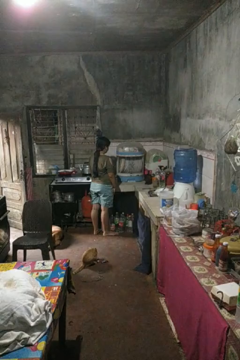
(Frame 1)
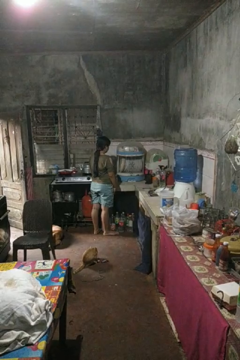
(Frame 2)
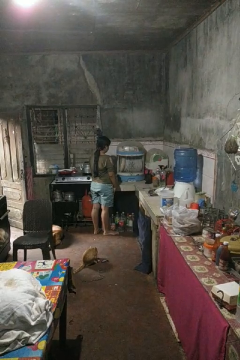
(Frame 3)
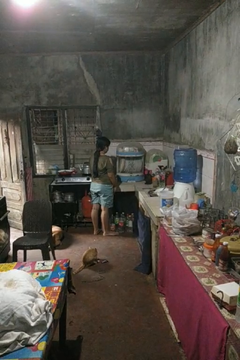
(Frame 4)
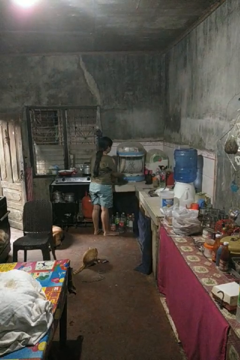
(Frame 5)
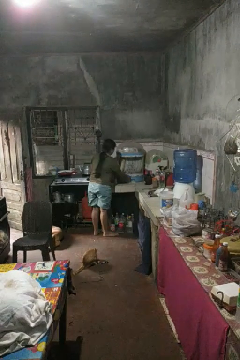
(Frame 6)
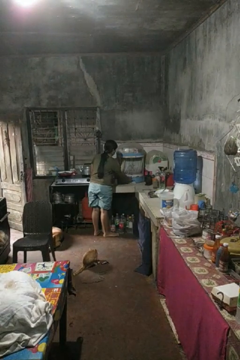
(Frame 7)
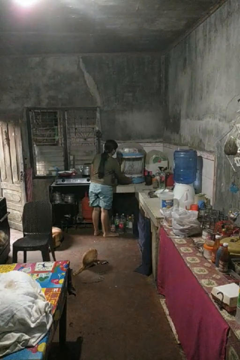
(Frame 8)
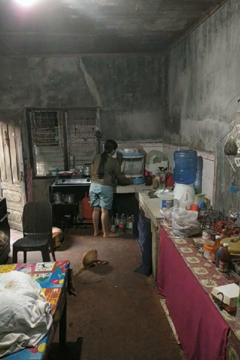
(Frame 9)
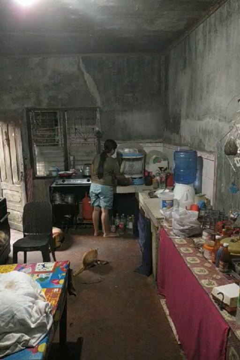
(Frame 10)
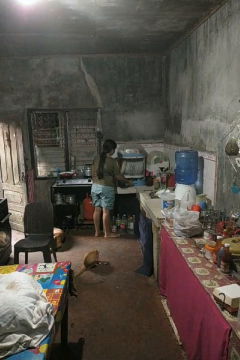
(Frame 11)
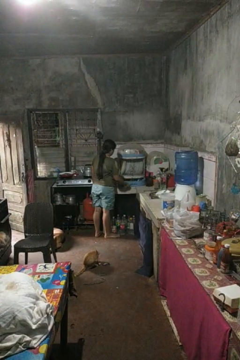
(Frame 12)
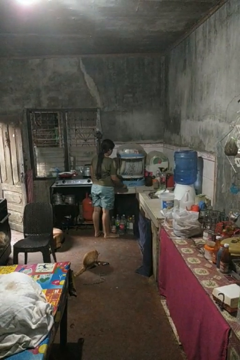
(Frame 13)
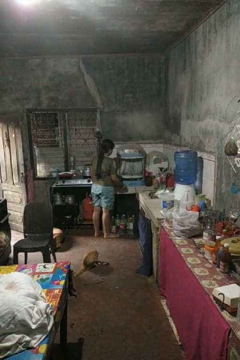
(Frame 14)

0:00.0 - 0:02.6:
person opens kitchen drawer

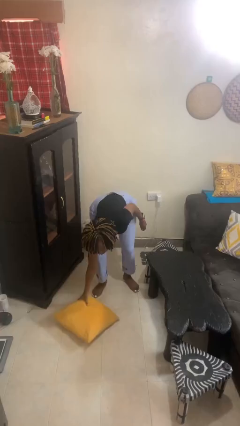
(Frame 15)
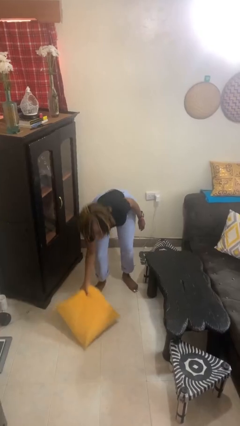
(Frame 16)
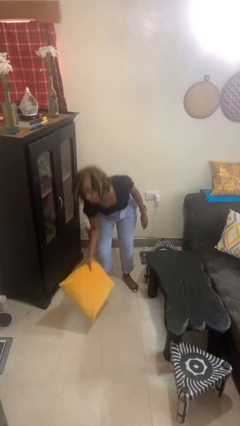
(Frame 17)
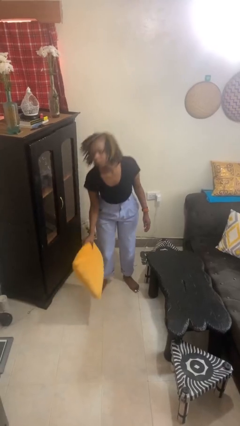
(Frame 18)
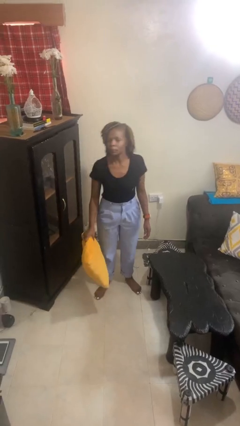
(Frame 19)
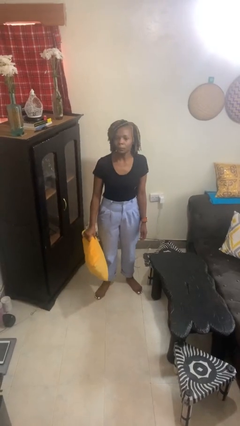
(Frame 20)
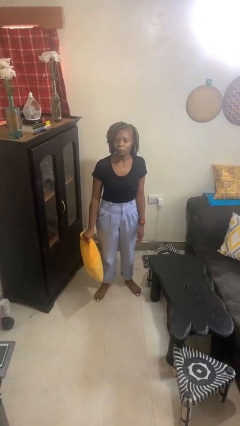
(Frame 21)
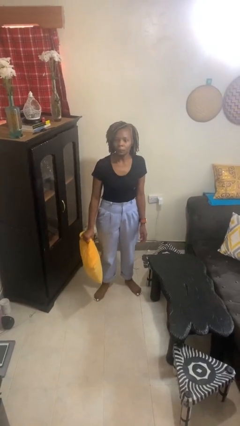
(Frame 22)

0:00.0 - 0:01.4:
person picks up object from floor

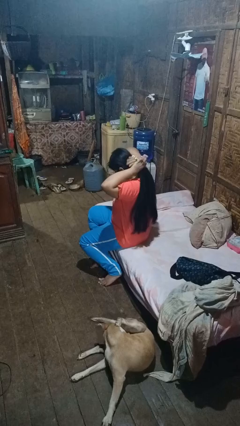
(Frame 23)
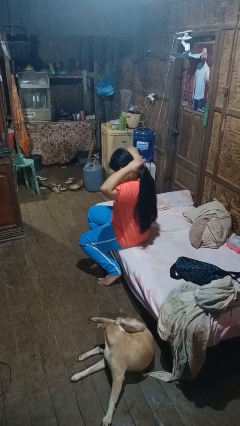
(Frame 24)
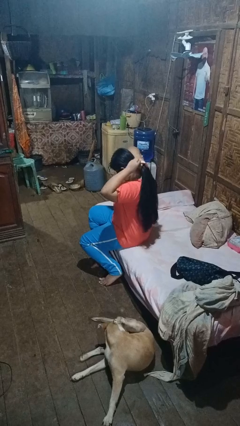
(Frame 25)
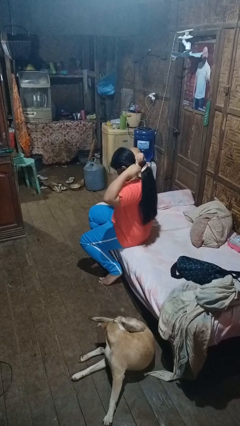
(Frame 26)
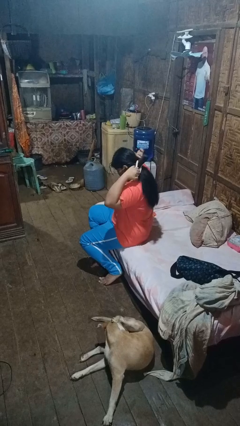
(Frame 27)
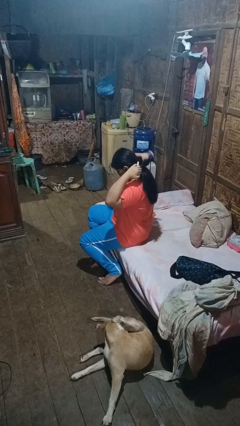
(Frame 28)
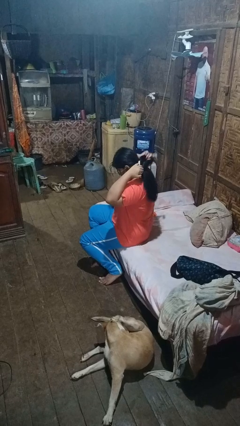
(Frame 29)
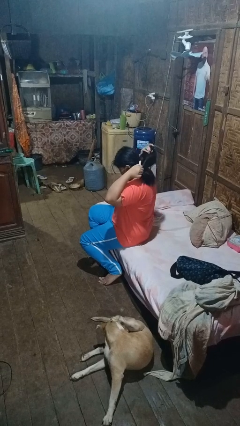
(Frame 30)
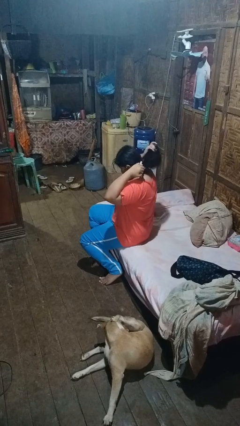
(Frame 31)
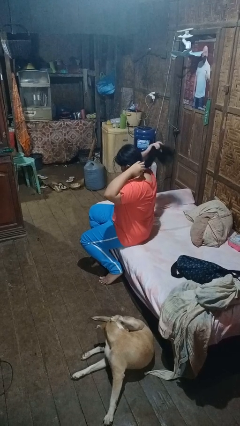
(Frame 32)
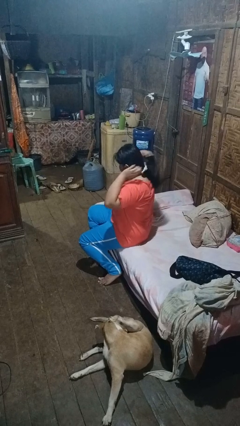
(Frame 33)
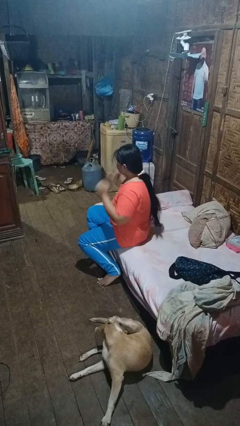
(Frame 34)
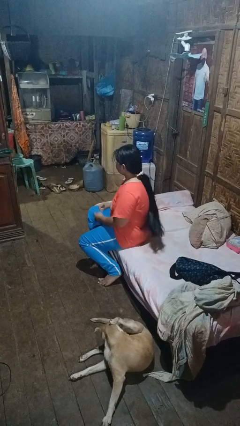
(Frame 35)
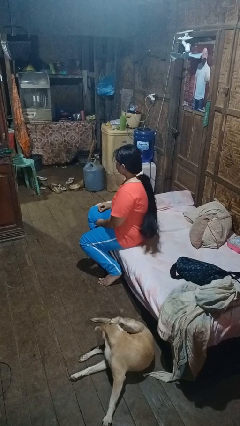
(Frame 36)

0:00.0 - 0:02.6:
person puts hair in ponytail

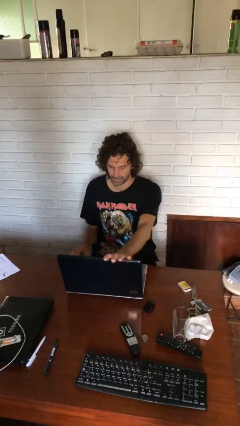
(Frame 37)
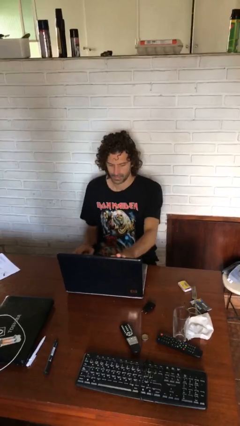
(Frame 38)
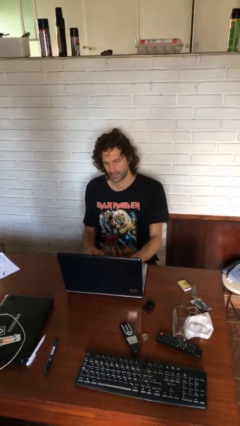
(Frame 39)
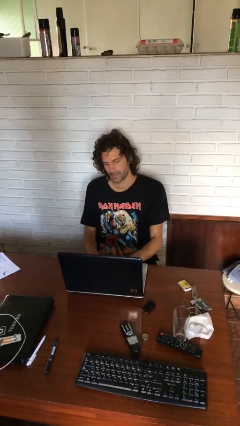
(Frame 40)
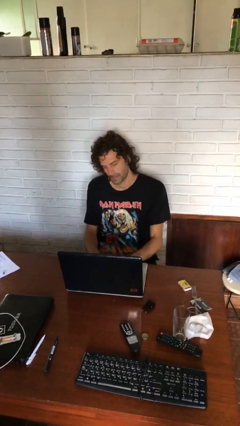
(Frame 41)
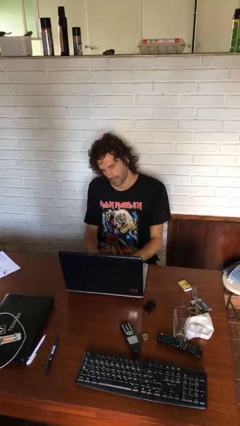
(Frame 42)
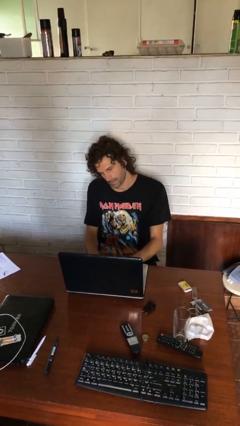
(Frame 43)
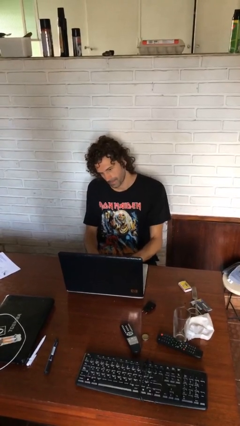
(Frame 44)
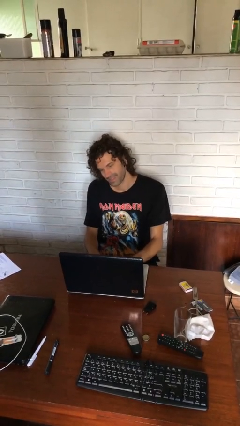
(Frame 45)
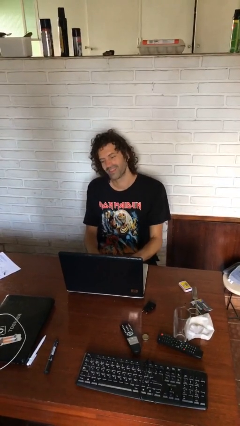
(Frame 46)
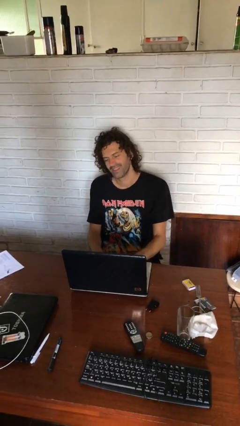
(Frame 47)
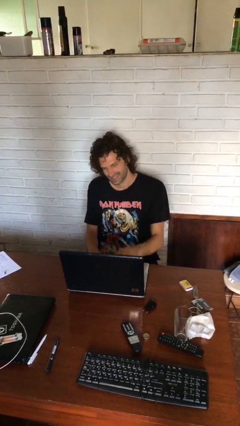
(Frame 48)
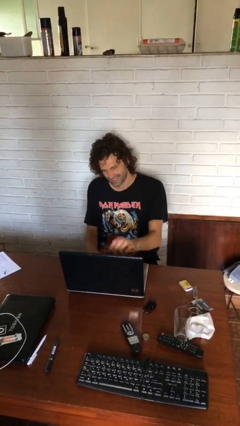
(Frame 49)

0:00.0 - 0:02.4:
person interacts with laptop

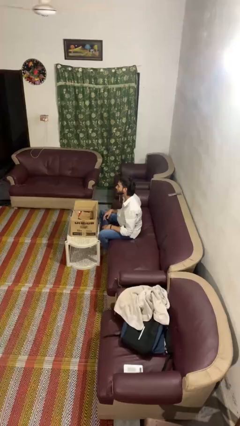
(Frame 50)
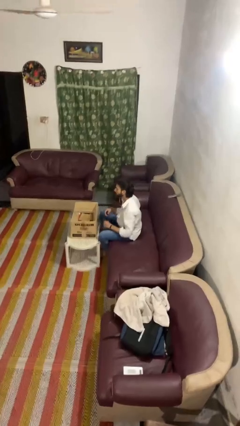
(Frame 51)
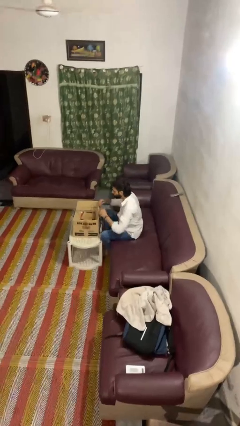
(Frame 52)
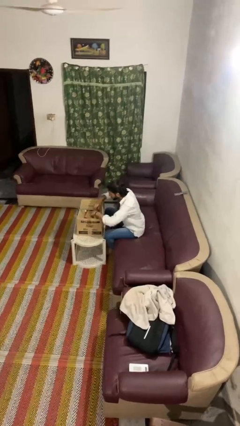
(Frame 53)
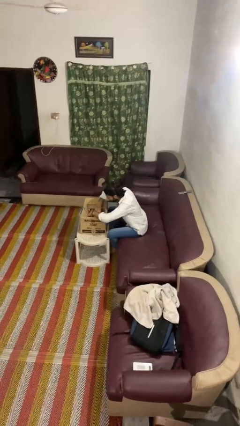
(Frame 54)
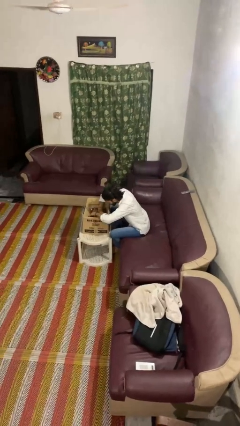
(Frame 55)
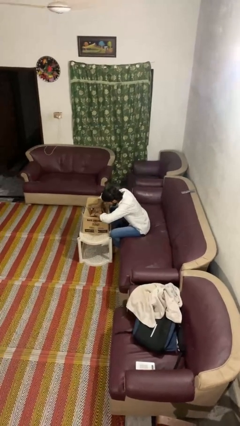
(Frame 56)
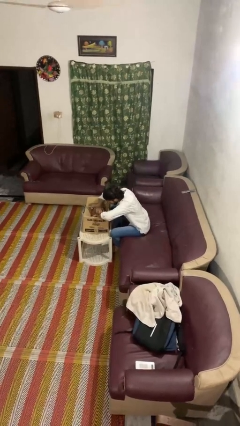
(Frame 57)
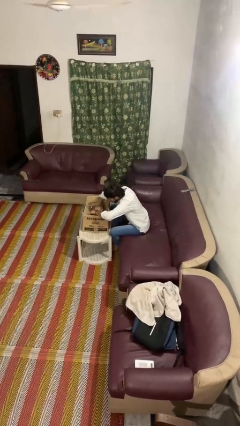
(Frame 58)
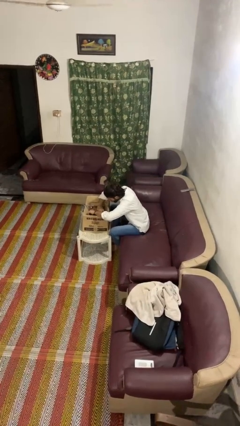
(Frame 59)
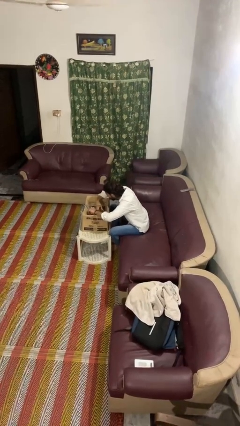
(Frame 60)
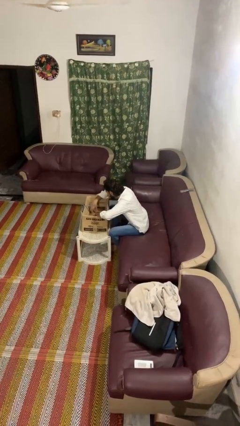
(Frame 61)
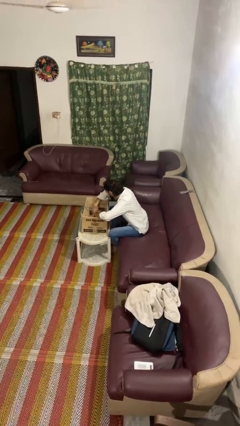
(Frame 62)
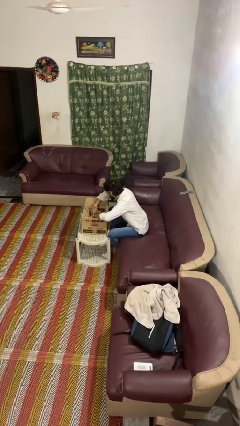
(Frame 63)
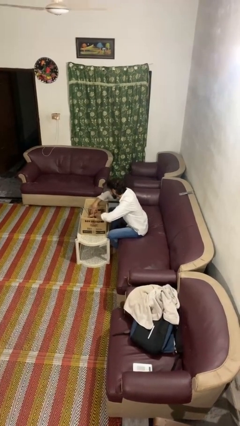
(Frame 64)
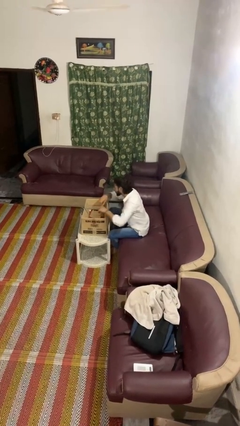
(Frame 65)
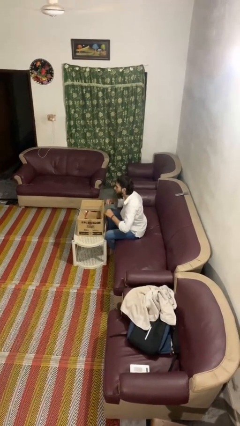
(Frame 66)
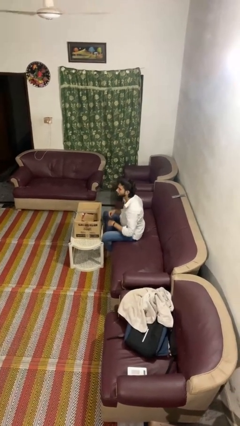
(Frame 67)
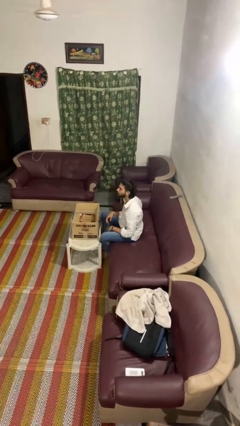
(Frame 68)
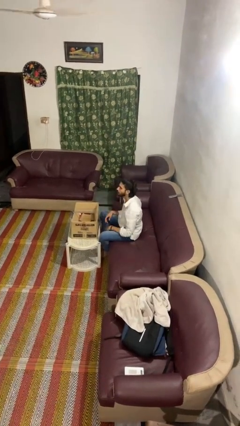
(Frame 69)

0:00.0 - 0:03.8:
person searches in box

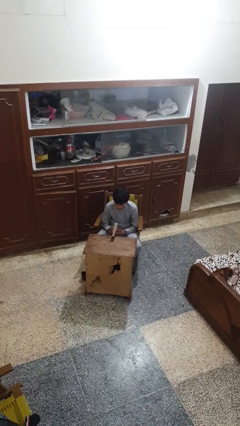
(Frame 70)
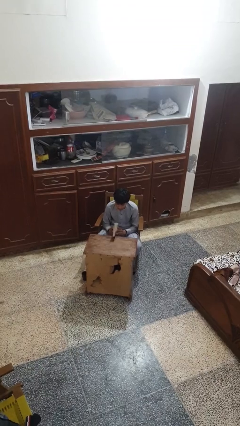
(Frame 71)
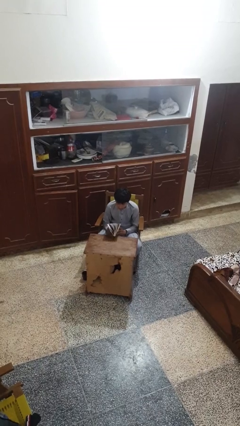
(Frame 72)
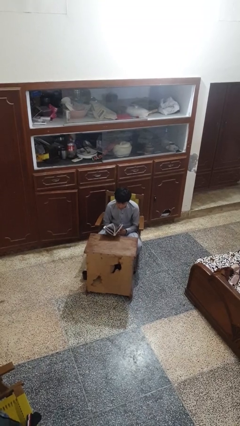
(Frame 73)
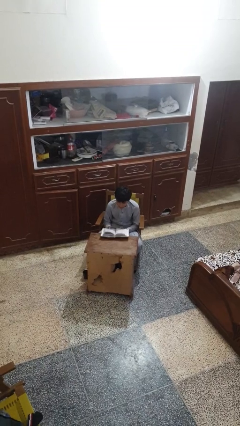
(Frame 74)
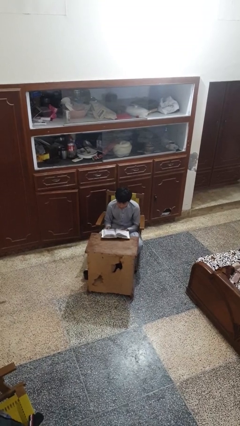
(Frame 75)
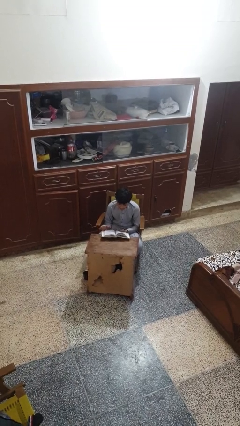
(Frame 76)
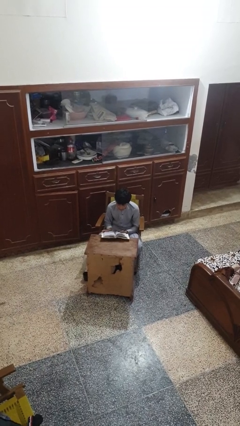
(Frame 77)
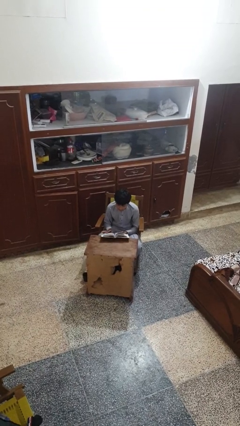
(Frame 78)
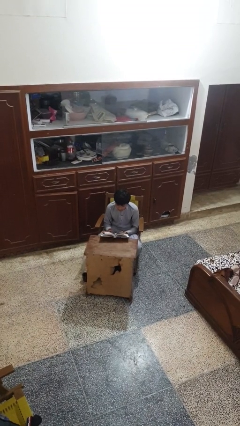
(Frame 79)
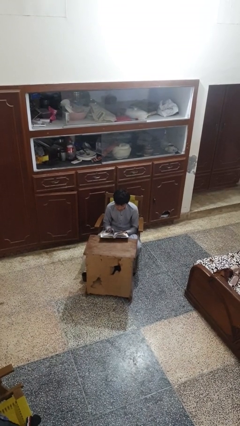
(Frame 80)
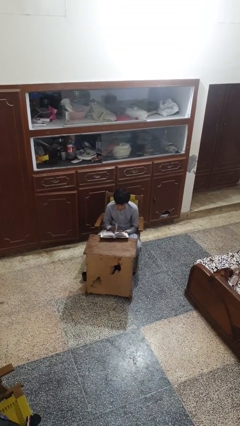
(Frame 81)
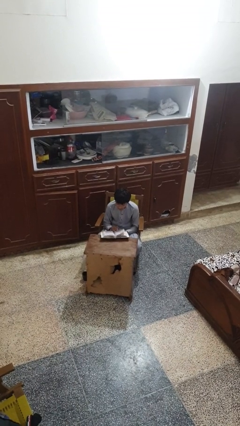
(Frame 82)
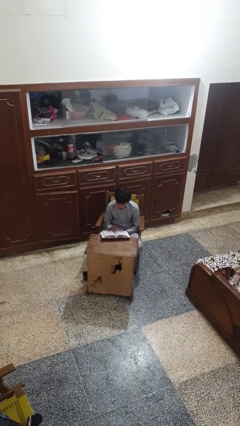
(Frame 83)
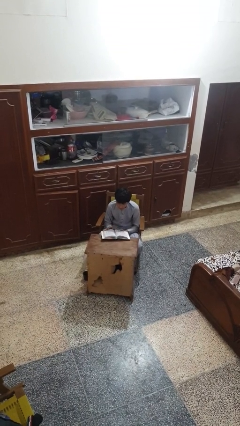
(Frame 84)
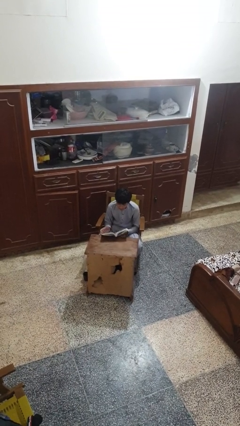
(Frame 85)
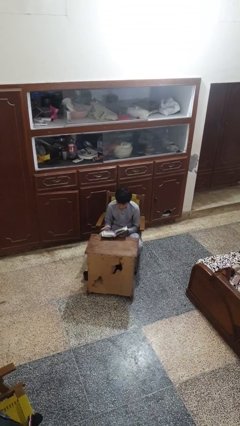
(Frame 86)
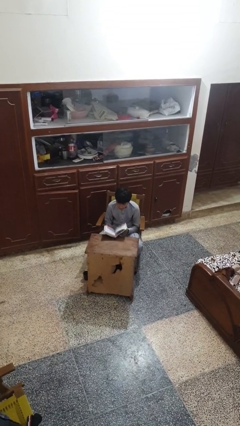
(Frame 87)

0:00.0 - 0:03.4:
person reads book

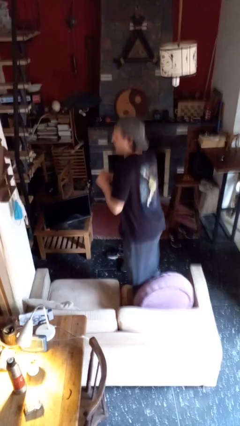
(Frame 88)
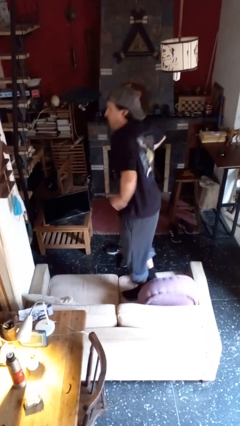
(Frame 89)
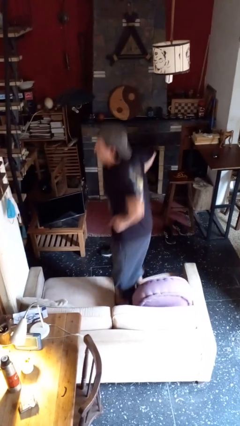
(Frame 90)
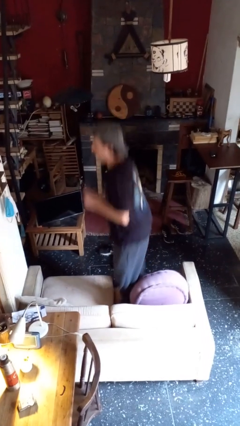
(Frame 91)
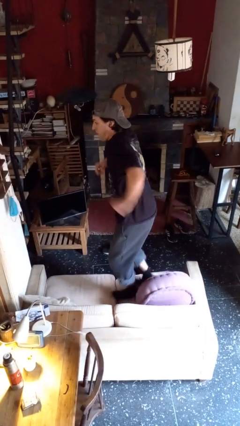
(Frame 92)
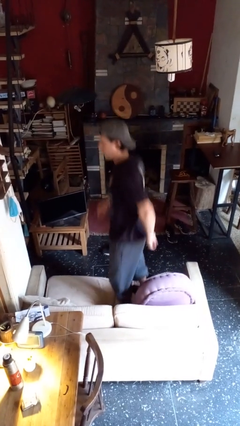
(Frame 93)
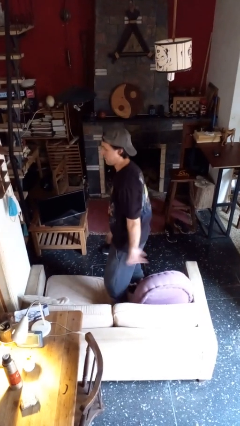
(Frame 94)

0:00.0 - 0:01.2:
person jumps on couch

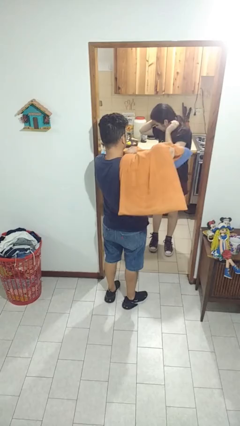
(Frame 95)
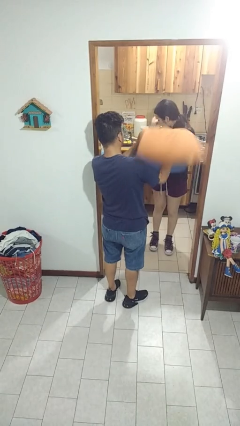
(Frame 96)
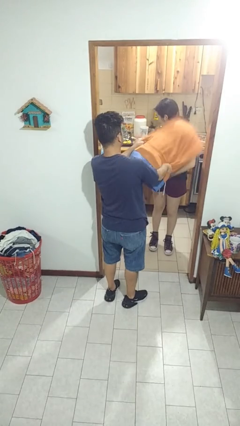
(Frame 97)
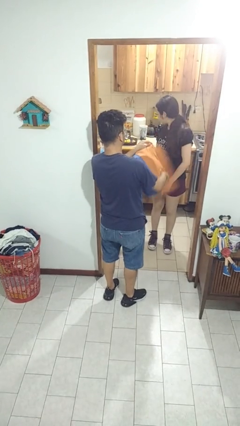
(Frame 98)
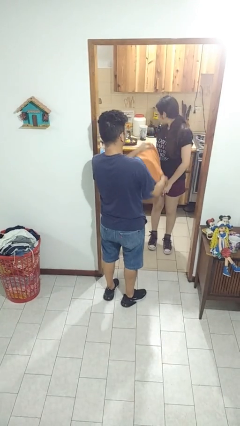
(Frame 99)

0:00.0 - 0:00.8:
person hits person with pillow
